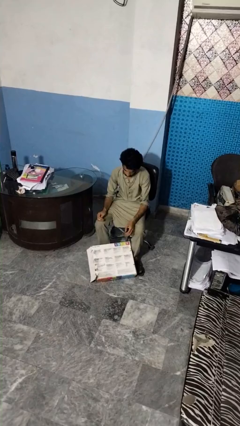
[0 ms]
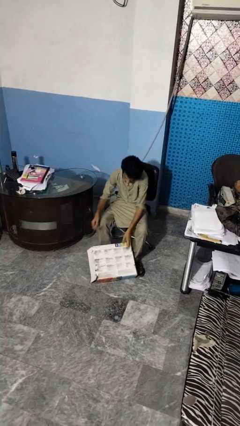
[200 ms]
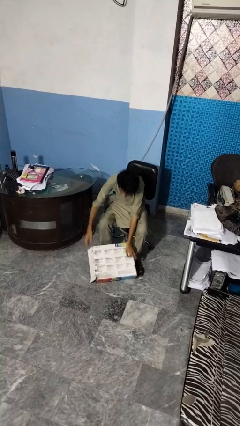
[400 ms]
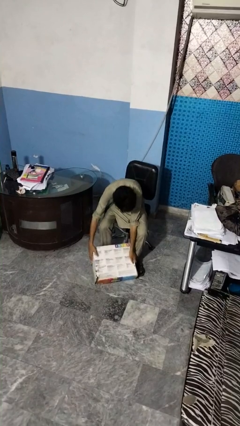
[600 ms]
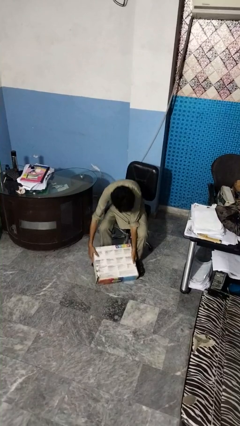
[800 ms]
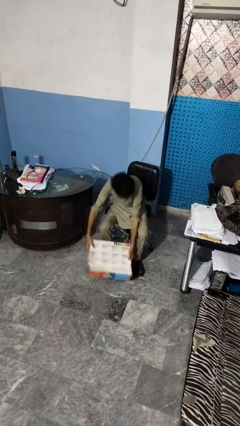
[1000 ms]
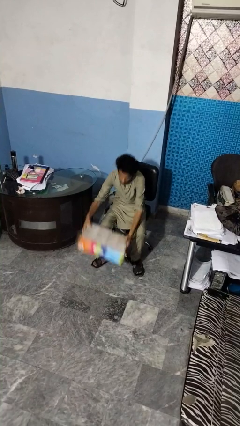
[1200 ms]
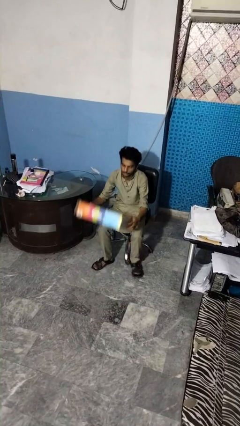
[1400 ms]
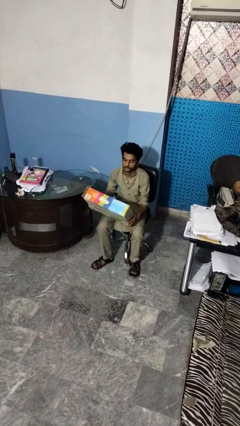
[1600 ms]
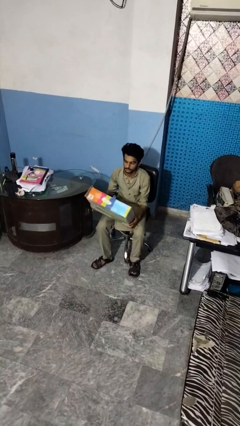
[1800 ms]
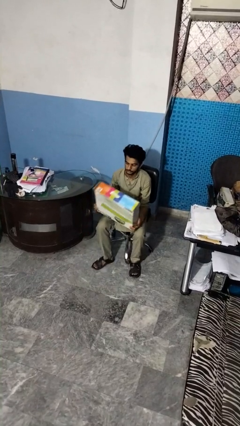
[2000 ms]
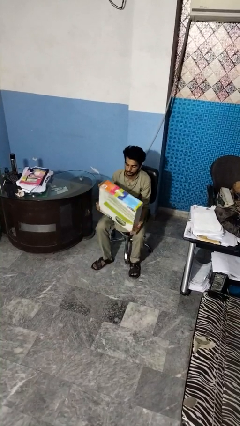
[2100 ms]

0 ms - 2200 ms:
person picks up object from floor

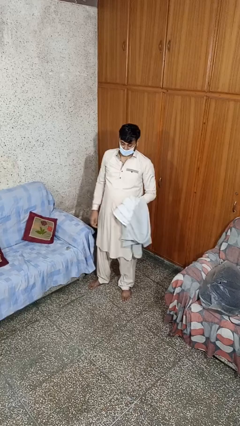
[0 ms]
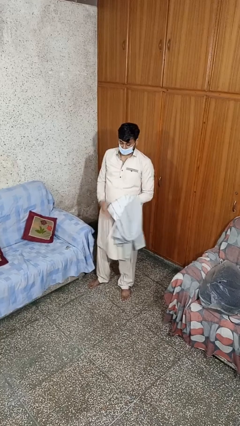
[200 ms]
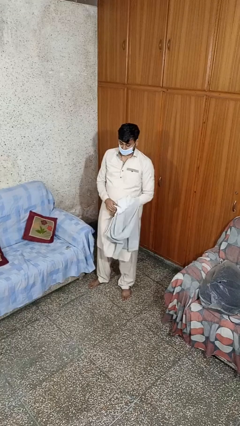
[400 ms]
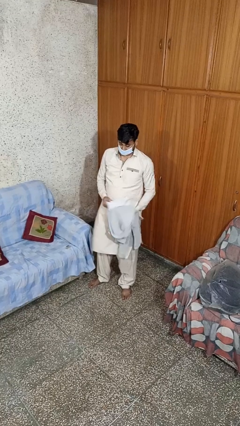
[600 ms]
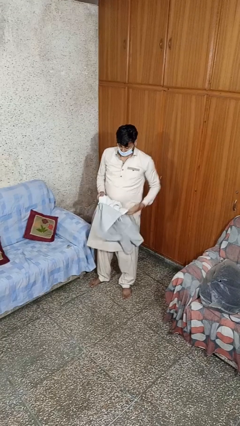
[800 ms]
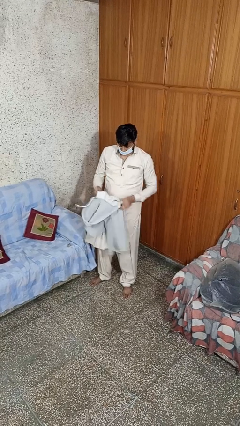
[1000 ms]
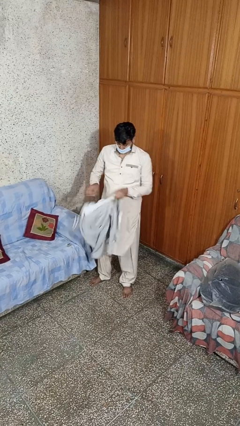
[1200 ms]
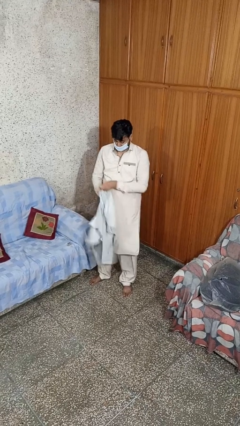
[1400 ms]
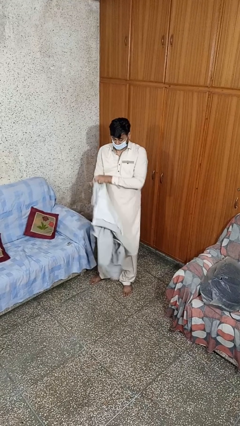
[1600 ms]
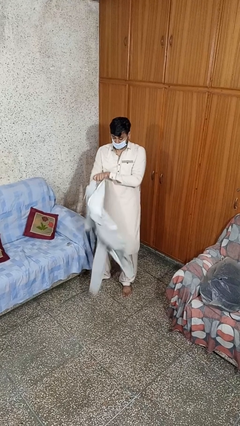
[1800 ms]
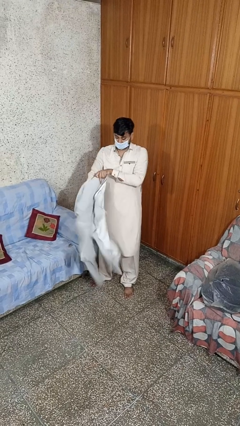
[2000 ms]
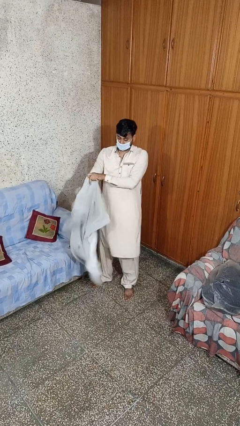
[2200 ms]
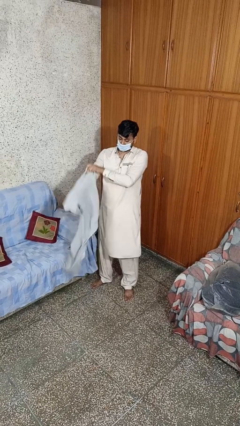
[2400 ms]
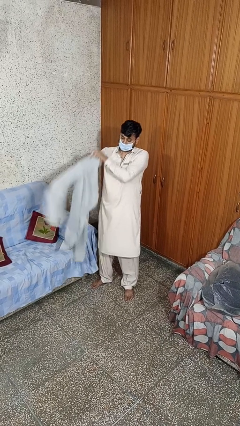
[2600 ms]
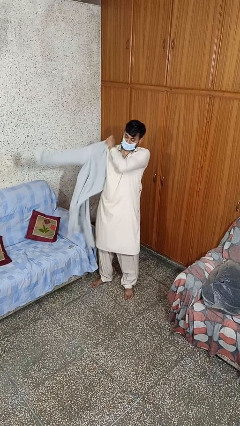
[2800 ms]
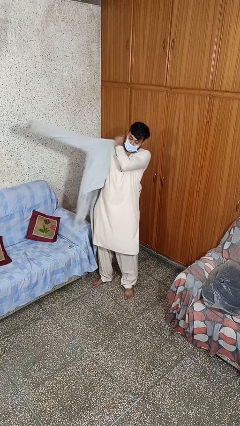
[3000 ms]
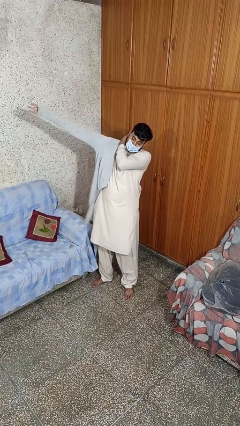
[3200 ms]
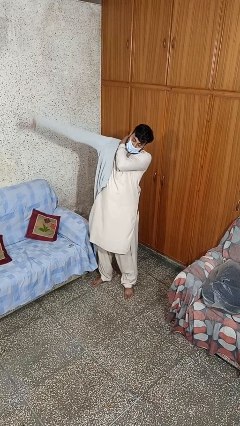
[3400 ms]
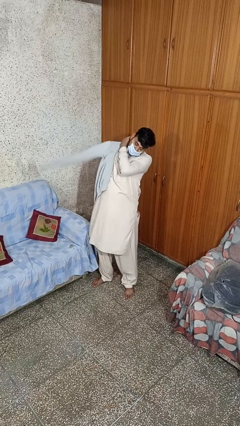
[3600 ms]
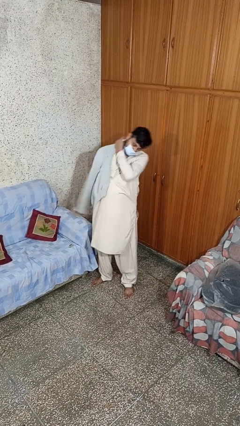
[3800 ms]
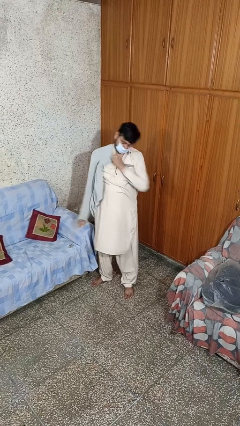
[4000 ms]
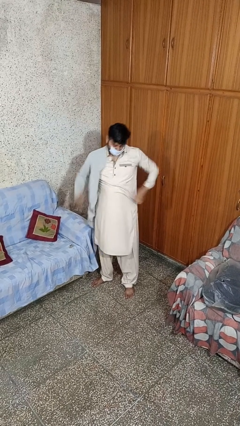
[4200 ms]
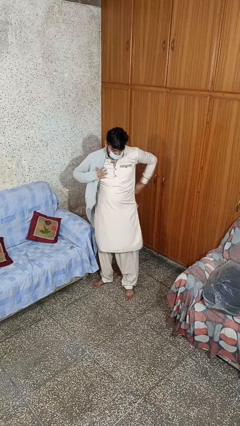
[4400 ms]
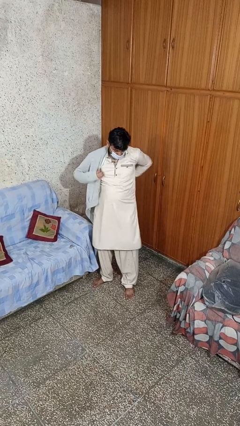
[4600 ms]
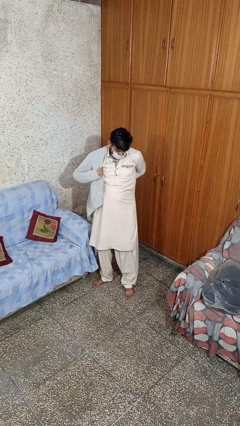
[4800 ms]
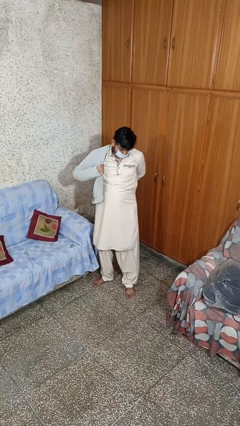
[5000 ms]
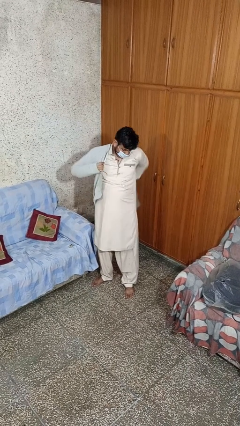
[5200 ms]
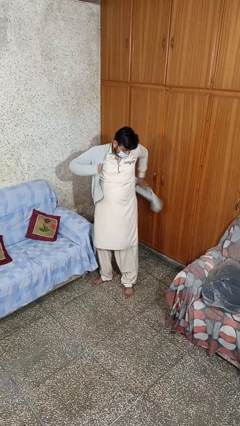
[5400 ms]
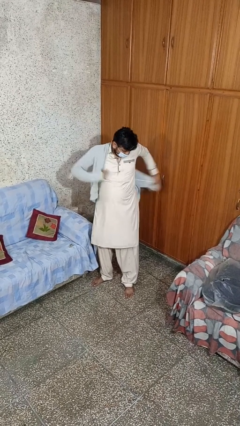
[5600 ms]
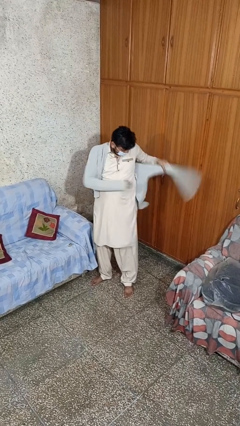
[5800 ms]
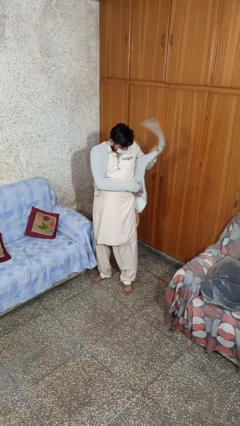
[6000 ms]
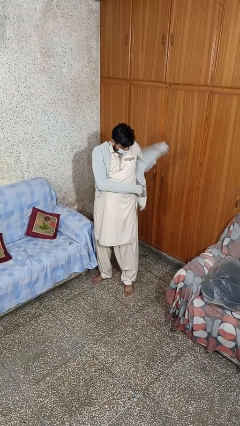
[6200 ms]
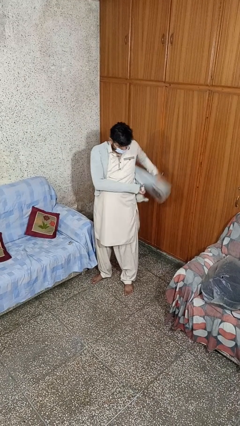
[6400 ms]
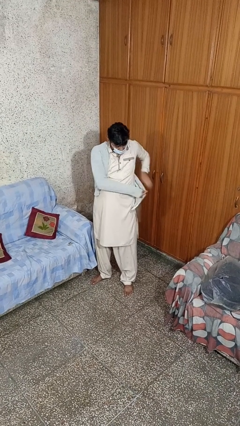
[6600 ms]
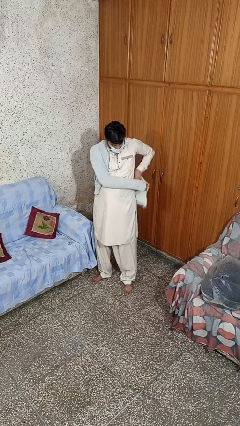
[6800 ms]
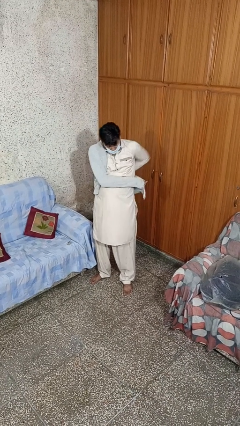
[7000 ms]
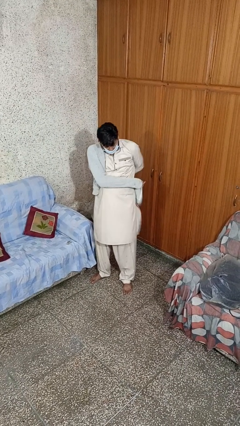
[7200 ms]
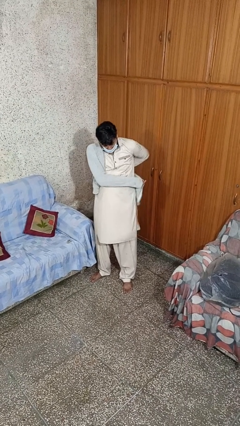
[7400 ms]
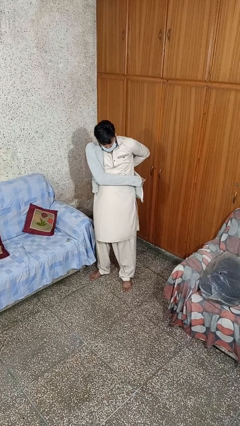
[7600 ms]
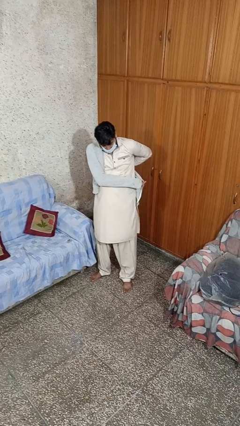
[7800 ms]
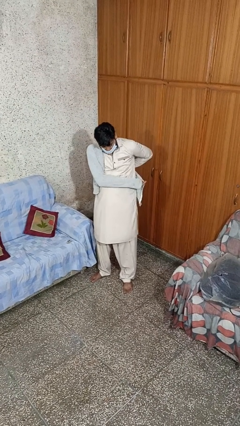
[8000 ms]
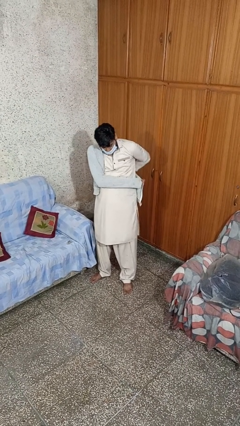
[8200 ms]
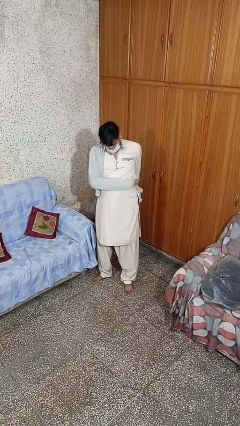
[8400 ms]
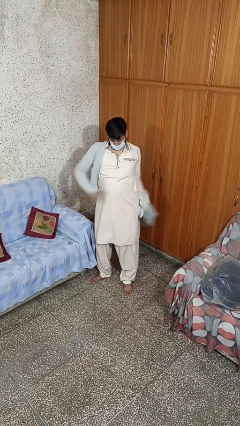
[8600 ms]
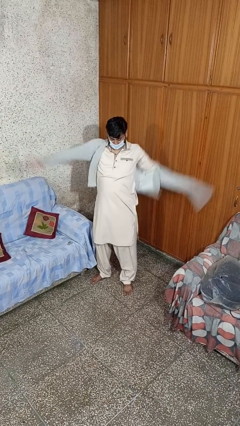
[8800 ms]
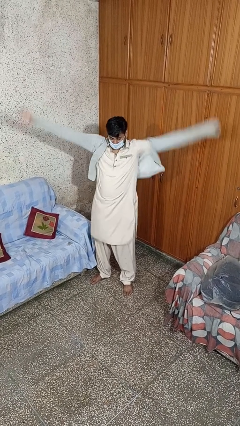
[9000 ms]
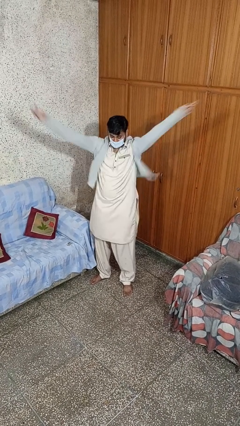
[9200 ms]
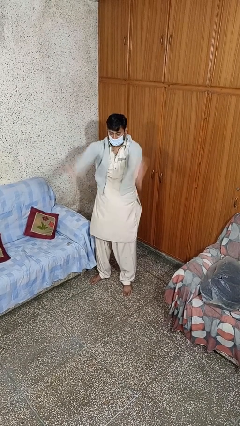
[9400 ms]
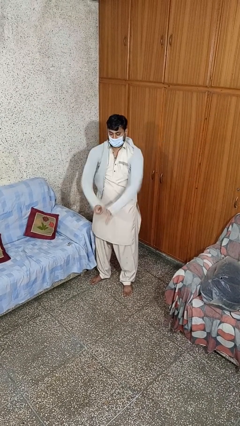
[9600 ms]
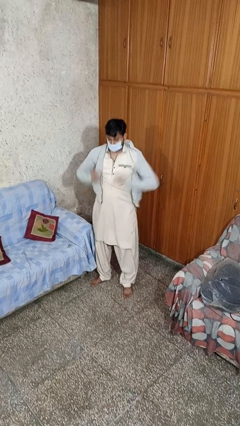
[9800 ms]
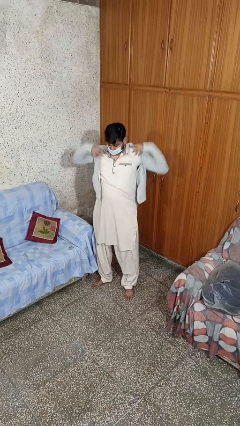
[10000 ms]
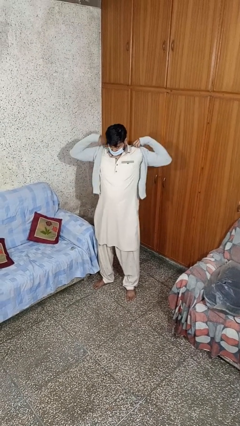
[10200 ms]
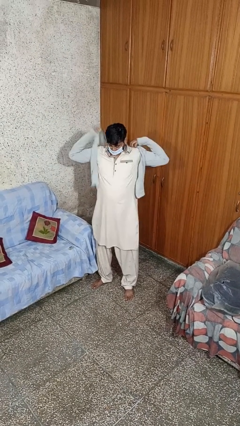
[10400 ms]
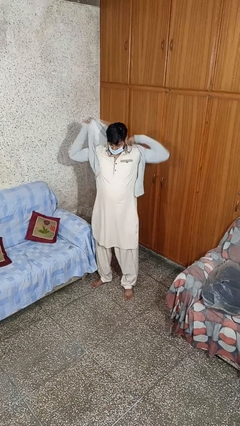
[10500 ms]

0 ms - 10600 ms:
person puts on jacket

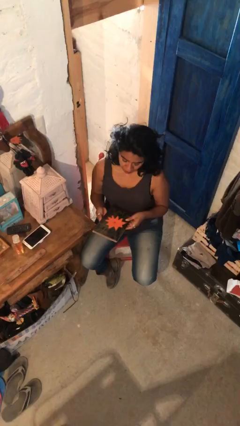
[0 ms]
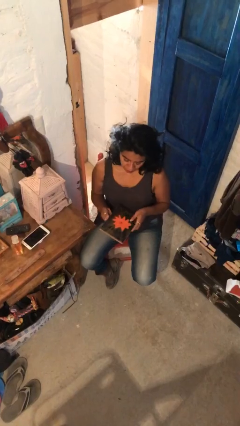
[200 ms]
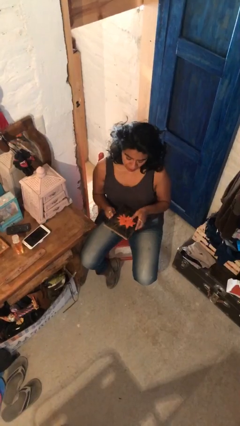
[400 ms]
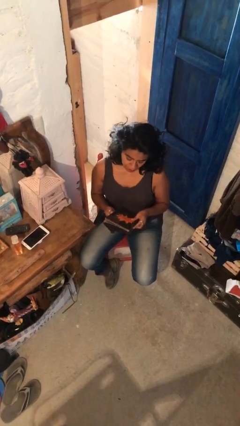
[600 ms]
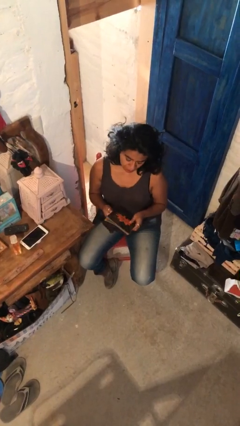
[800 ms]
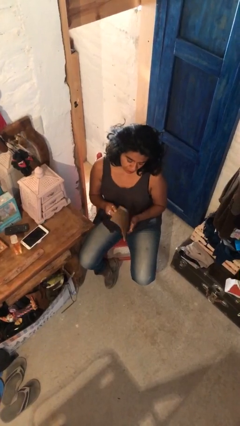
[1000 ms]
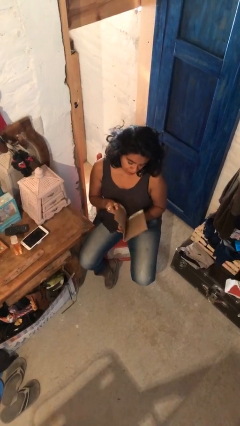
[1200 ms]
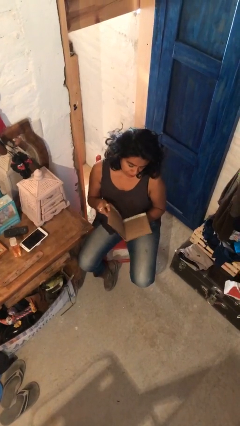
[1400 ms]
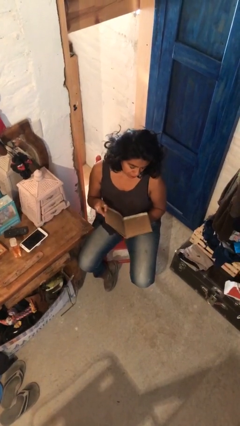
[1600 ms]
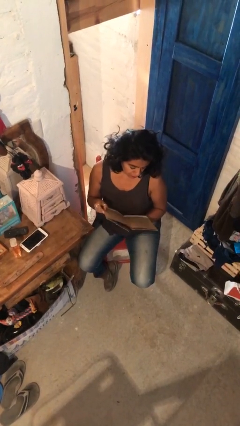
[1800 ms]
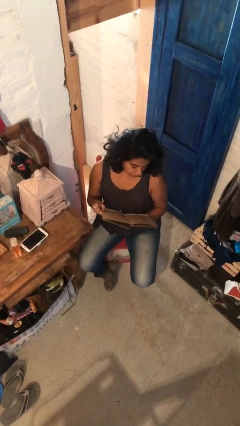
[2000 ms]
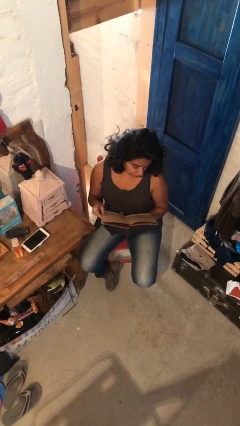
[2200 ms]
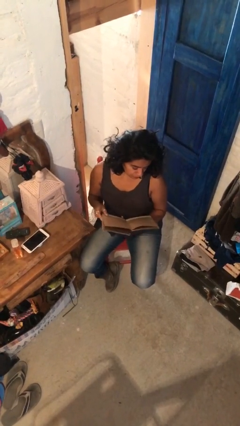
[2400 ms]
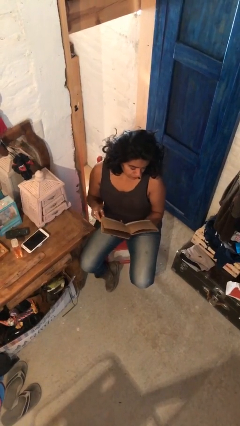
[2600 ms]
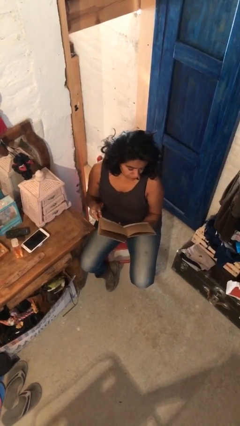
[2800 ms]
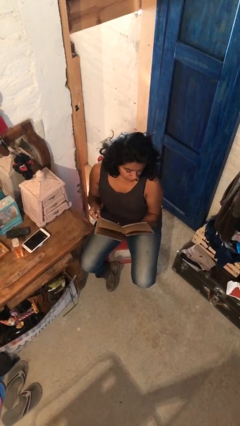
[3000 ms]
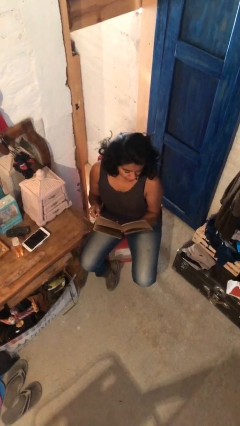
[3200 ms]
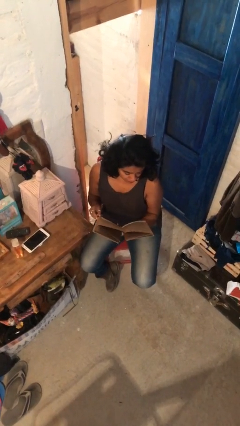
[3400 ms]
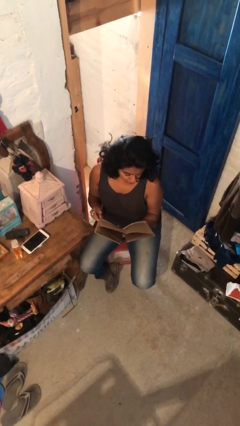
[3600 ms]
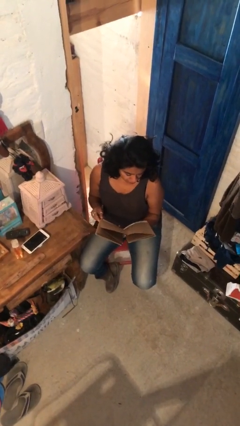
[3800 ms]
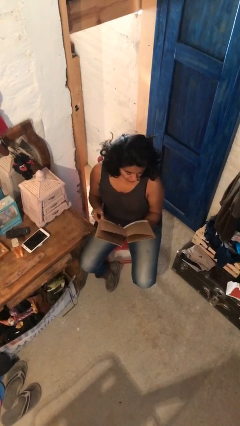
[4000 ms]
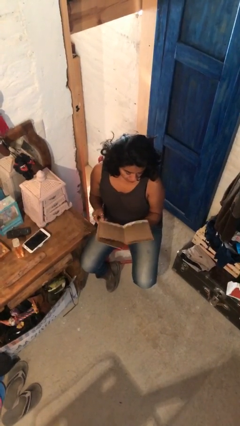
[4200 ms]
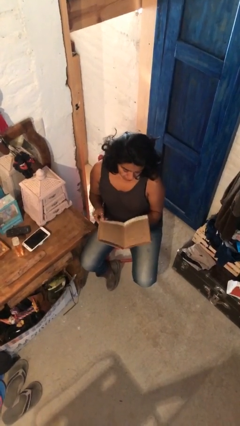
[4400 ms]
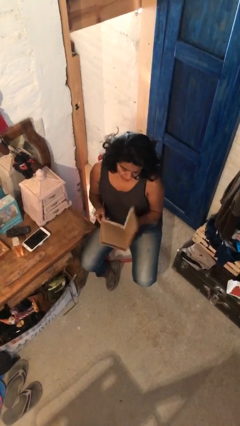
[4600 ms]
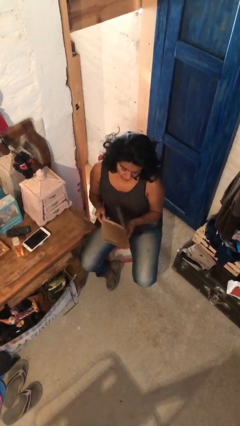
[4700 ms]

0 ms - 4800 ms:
person reads document
